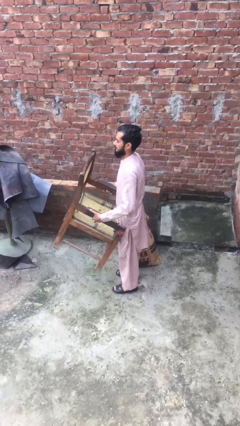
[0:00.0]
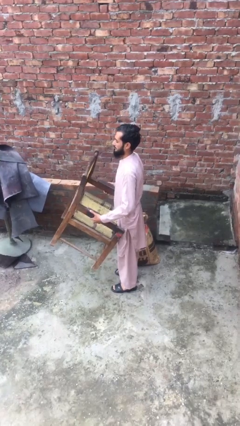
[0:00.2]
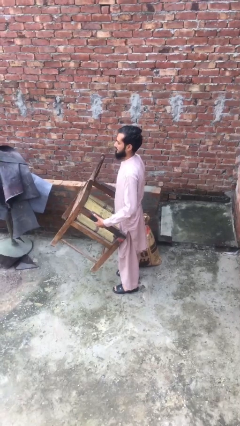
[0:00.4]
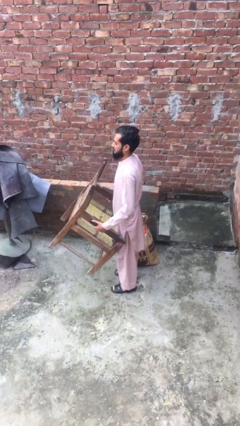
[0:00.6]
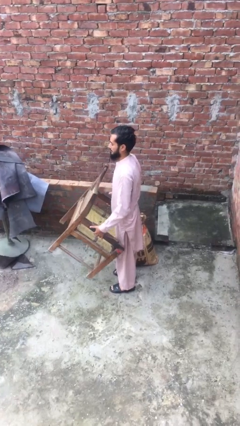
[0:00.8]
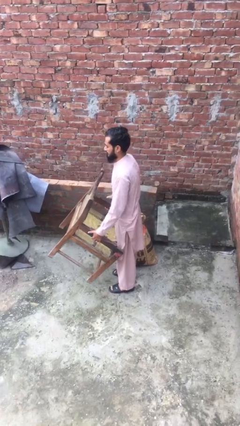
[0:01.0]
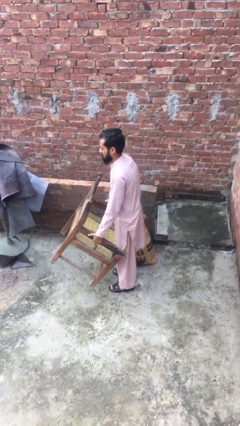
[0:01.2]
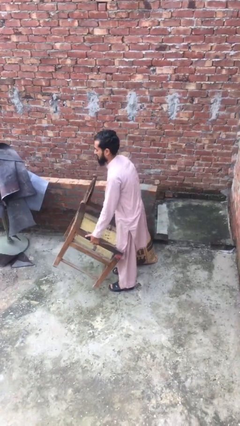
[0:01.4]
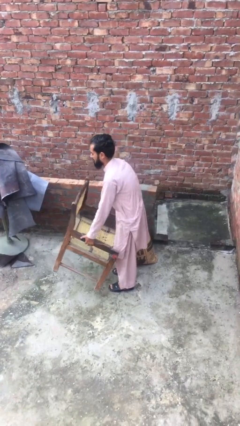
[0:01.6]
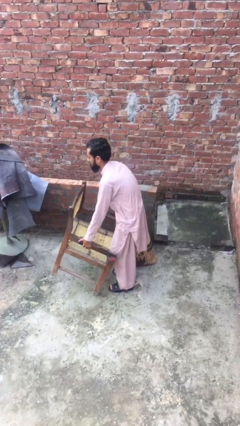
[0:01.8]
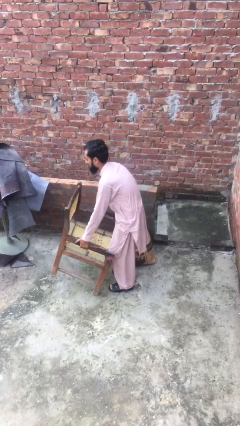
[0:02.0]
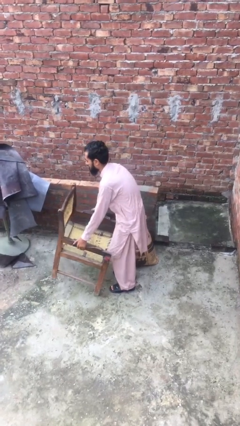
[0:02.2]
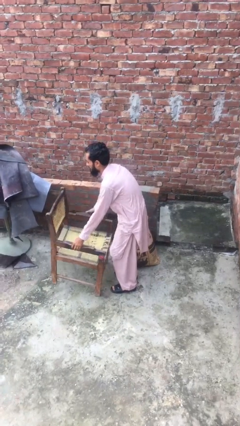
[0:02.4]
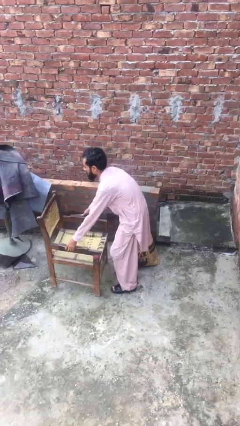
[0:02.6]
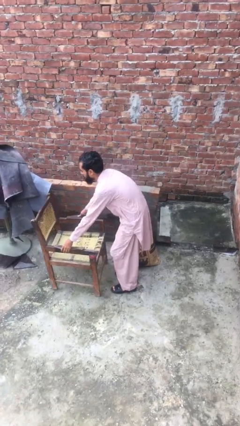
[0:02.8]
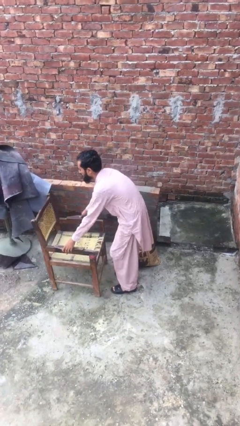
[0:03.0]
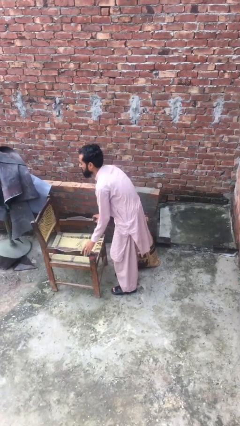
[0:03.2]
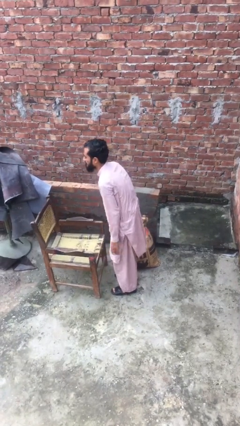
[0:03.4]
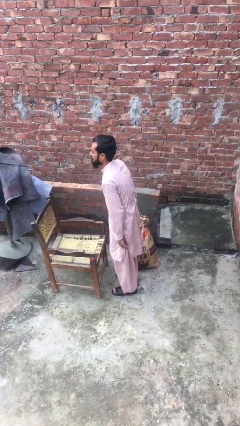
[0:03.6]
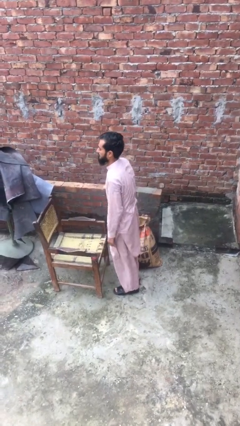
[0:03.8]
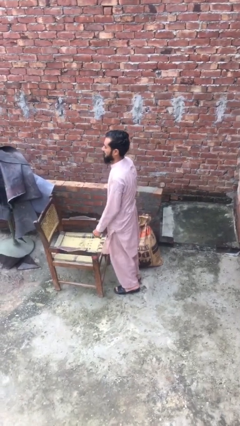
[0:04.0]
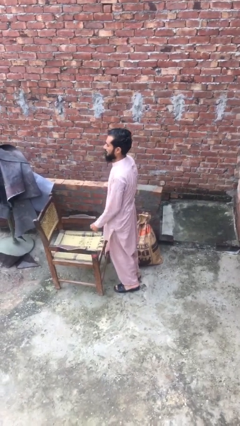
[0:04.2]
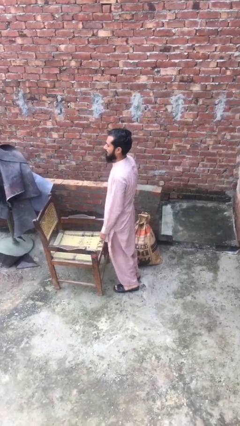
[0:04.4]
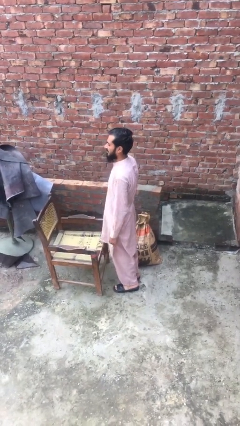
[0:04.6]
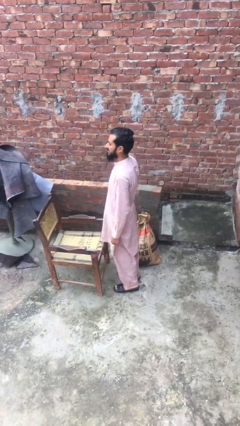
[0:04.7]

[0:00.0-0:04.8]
person puts down object on floor

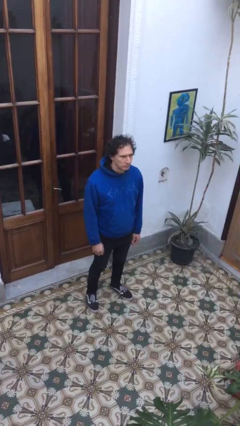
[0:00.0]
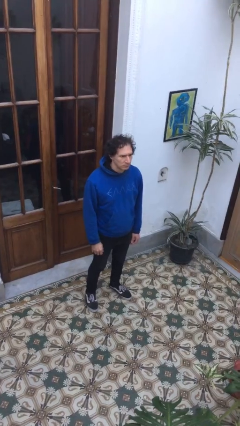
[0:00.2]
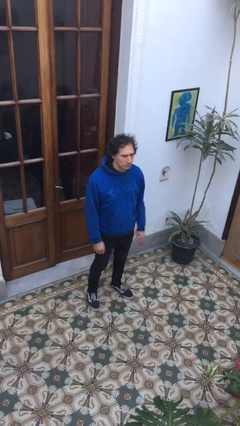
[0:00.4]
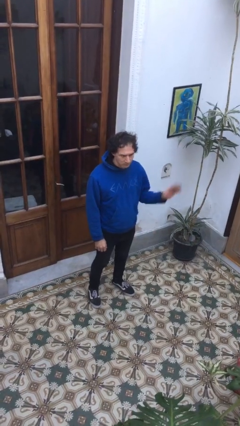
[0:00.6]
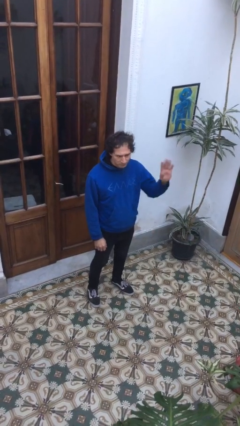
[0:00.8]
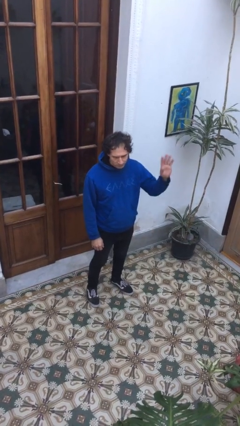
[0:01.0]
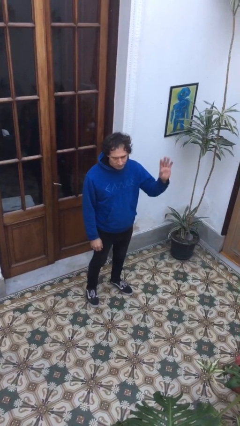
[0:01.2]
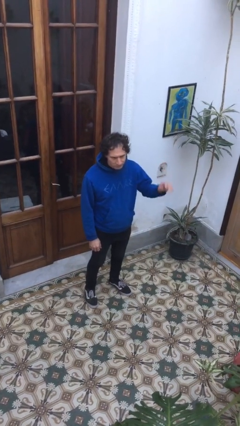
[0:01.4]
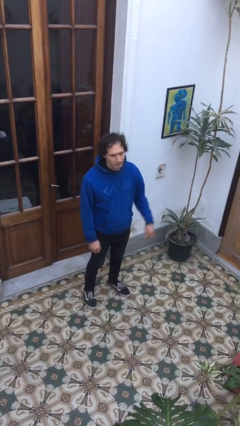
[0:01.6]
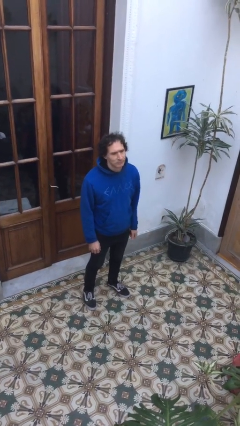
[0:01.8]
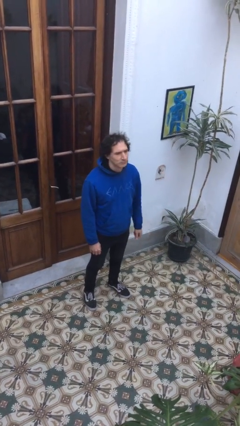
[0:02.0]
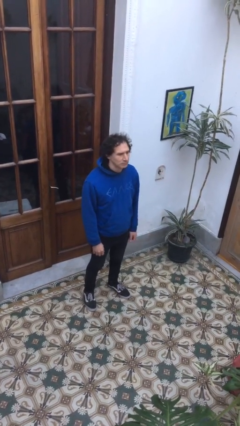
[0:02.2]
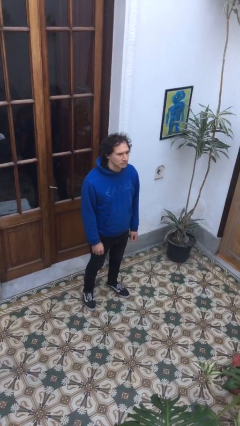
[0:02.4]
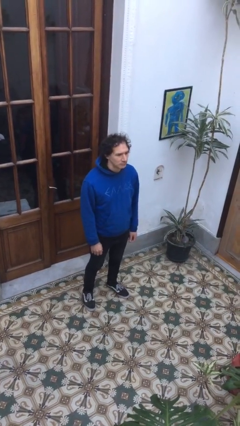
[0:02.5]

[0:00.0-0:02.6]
person waves at person

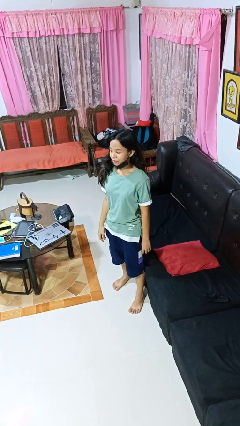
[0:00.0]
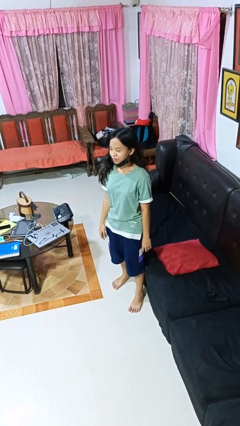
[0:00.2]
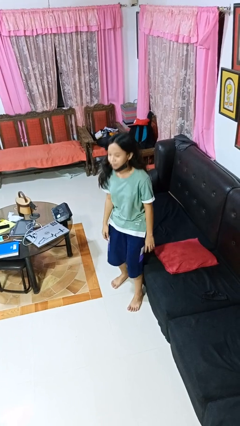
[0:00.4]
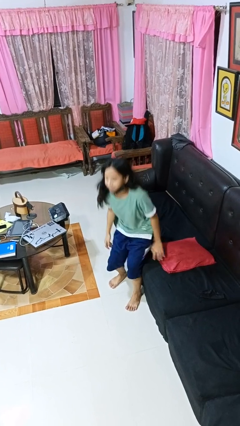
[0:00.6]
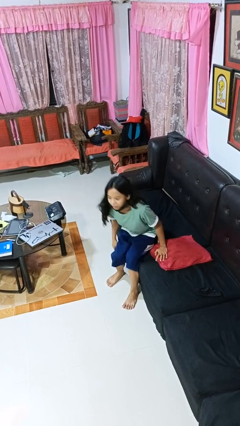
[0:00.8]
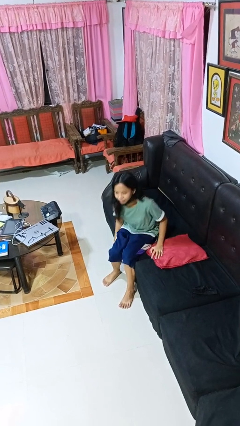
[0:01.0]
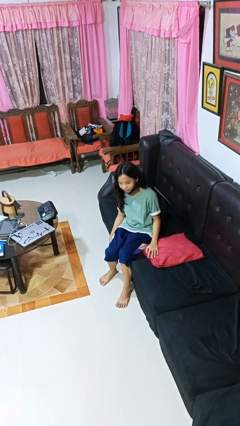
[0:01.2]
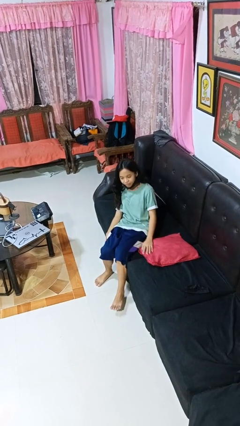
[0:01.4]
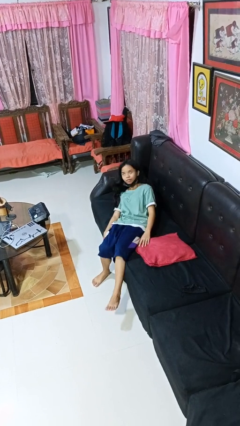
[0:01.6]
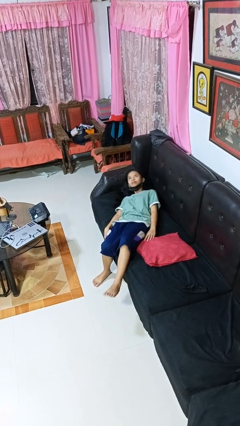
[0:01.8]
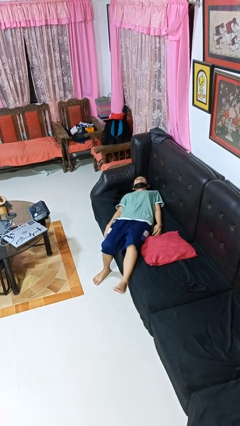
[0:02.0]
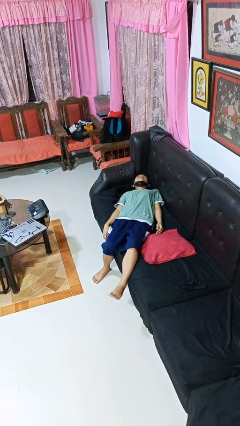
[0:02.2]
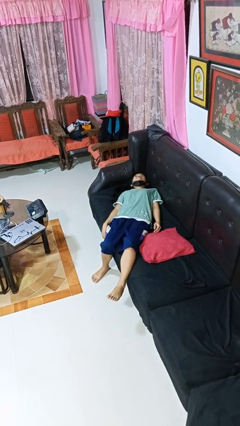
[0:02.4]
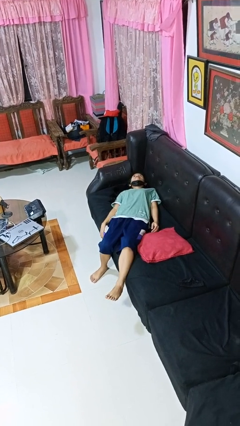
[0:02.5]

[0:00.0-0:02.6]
person lies down on couch

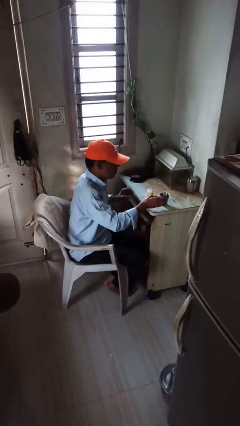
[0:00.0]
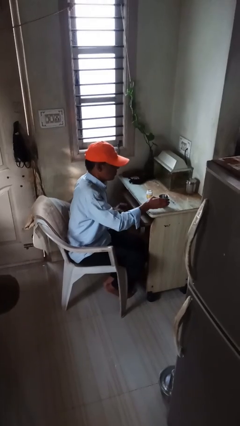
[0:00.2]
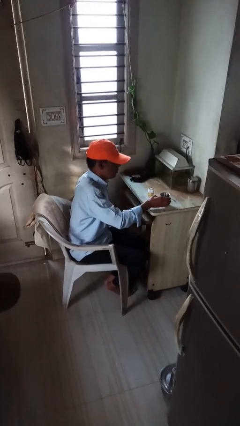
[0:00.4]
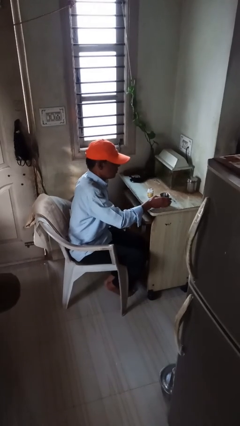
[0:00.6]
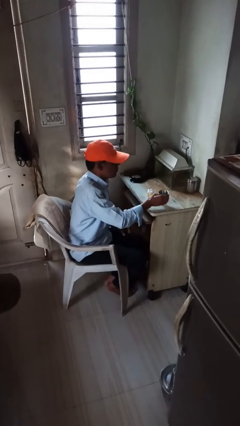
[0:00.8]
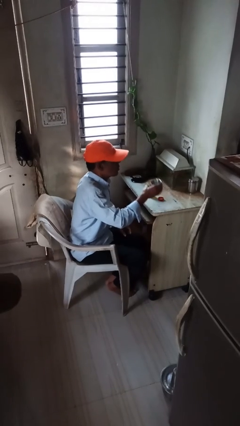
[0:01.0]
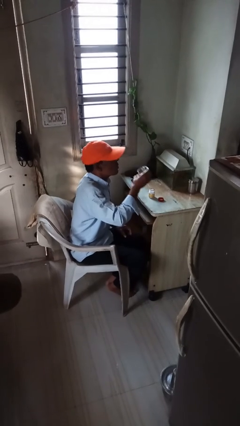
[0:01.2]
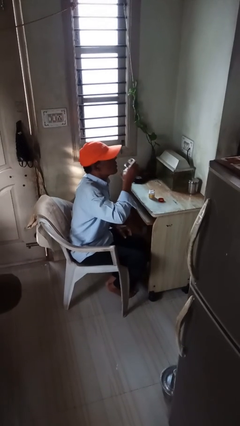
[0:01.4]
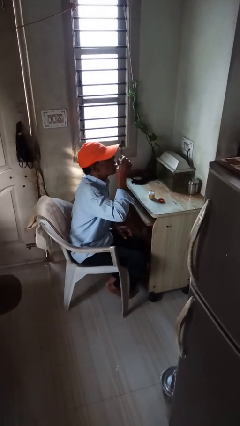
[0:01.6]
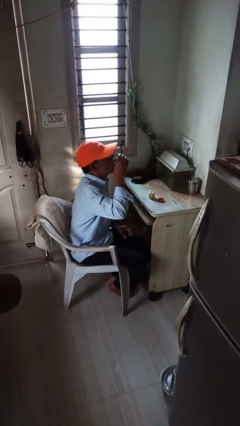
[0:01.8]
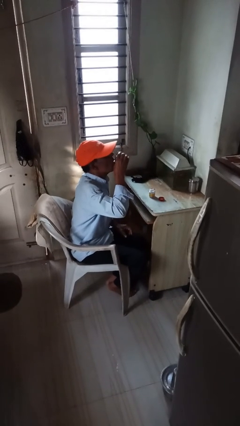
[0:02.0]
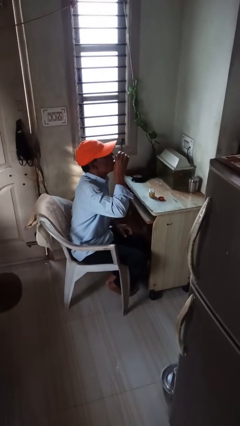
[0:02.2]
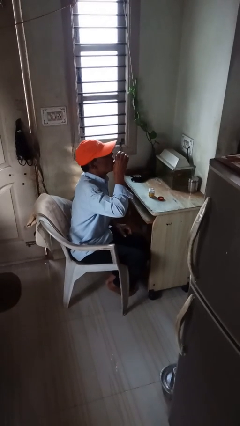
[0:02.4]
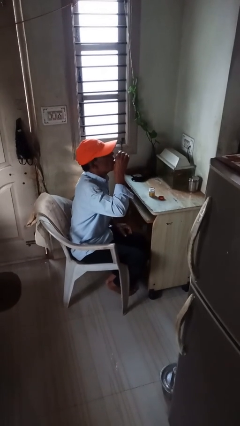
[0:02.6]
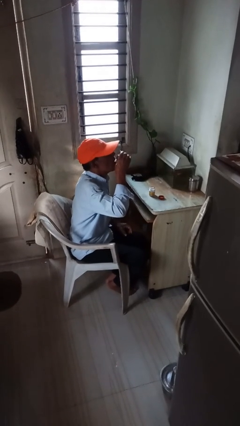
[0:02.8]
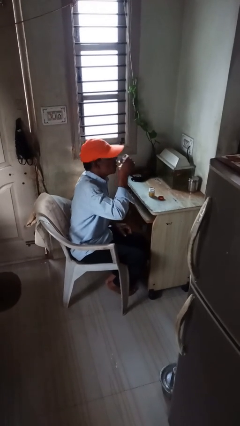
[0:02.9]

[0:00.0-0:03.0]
person drinks from cup

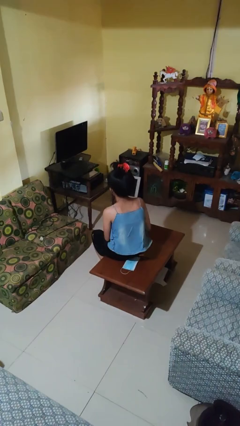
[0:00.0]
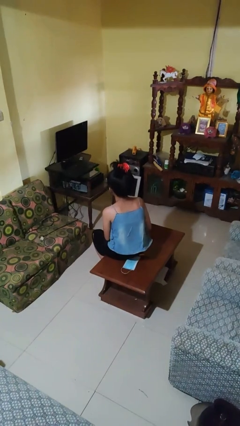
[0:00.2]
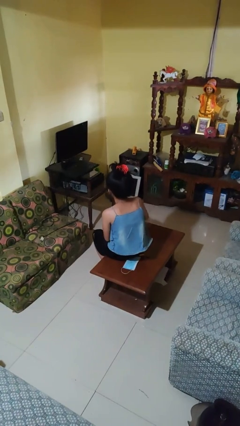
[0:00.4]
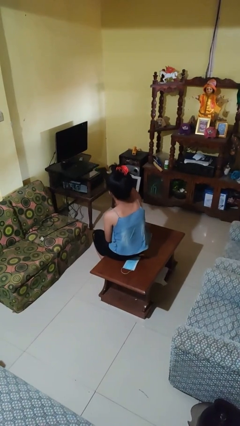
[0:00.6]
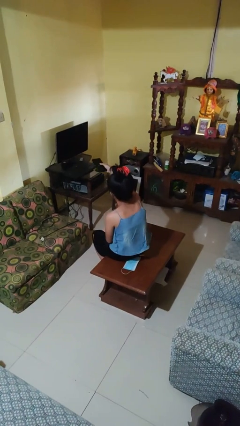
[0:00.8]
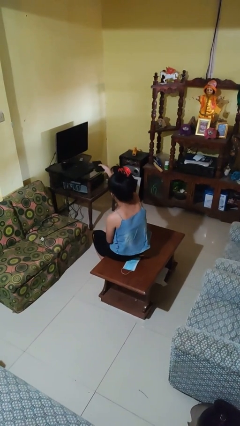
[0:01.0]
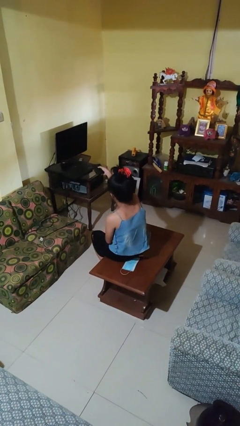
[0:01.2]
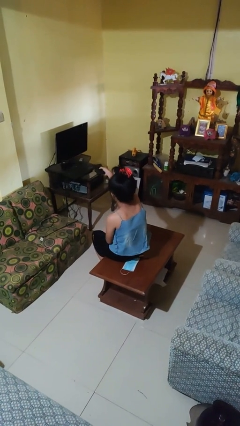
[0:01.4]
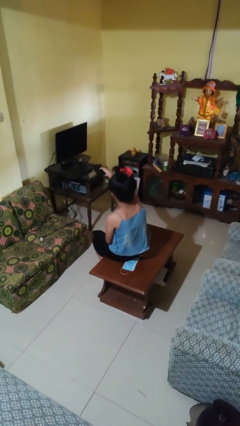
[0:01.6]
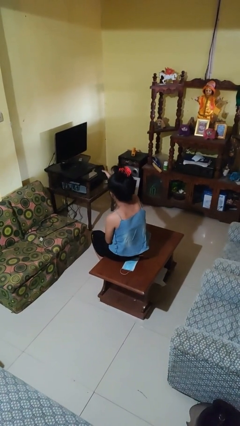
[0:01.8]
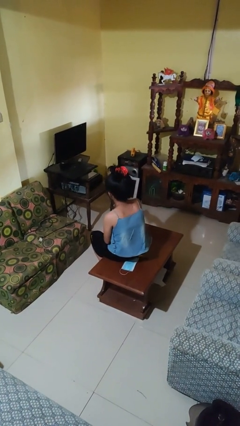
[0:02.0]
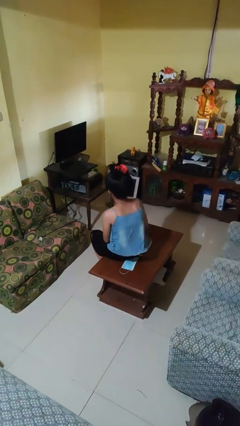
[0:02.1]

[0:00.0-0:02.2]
person uses television remote

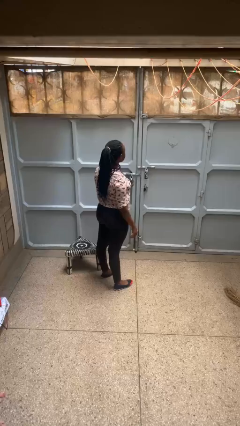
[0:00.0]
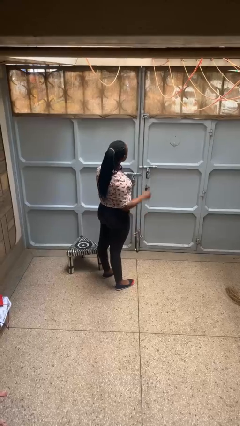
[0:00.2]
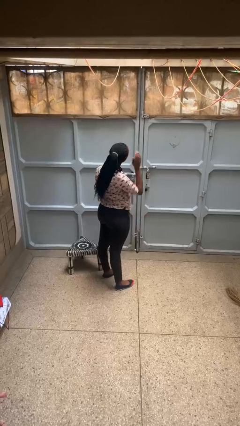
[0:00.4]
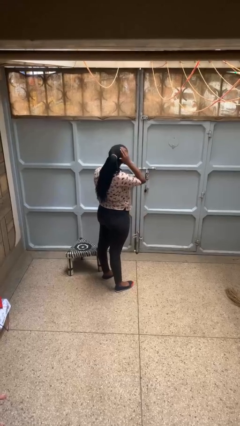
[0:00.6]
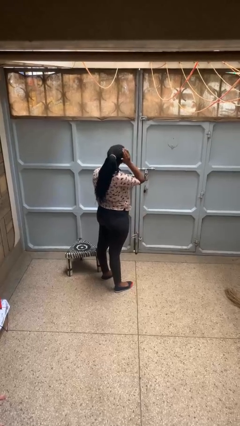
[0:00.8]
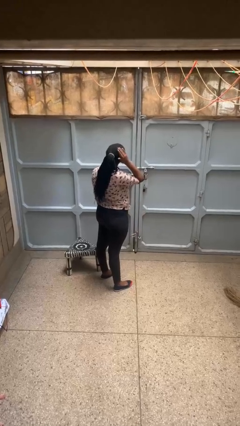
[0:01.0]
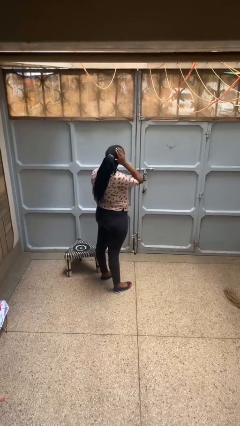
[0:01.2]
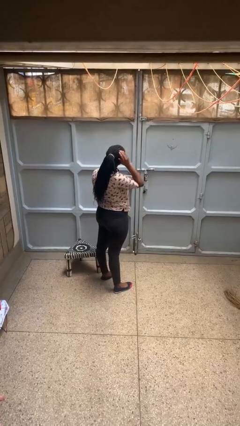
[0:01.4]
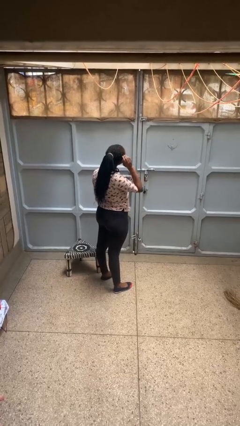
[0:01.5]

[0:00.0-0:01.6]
person pats head

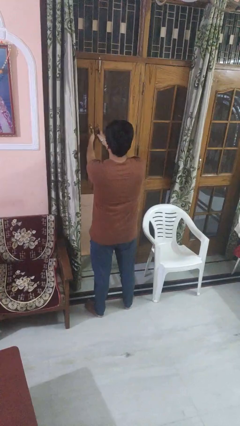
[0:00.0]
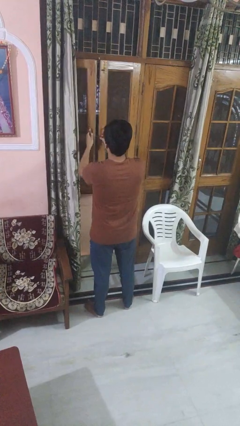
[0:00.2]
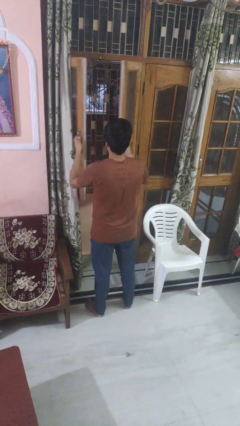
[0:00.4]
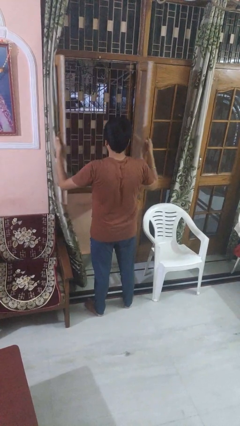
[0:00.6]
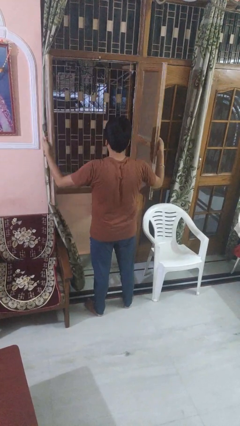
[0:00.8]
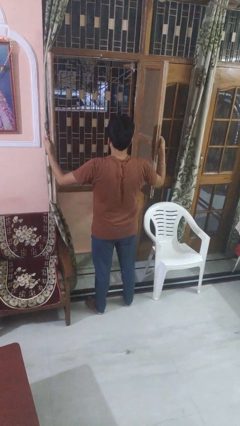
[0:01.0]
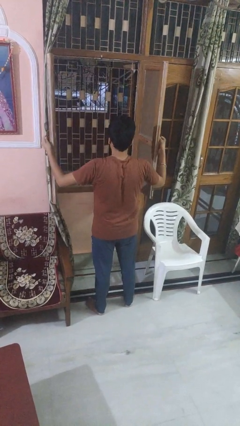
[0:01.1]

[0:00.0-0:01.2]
person opens home window
